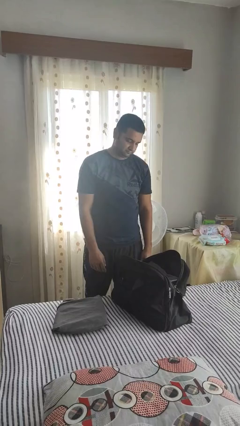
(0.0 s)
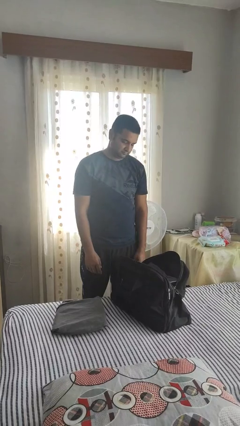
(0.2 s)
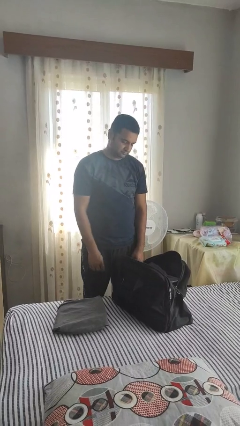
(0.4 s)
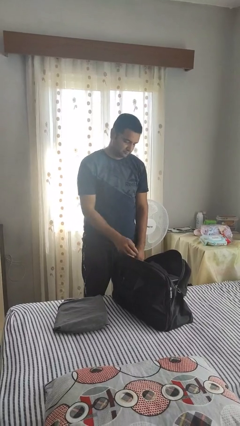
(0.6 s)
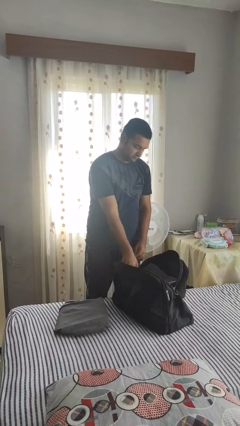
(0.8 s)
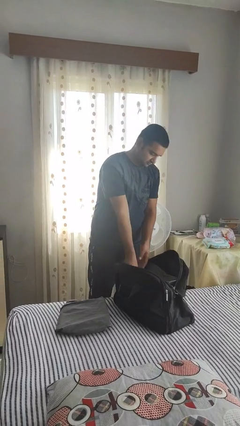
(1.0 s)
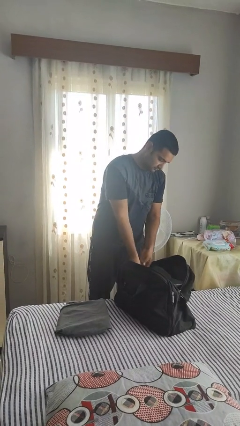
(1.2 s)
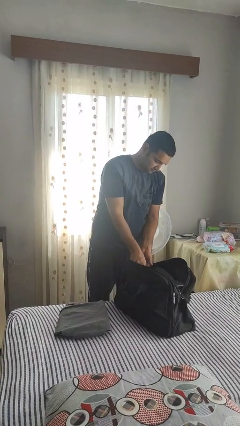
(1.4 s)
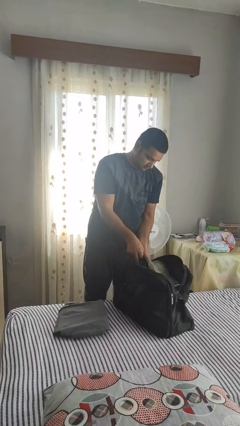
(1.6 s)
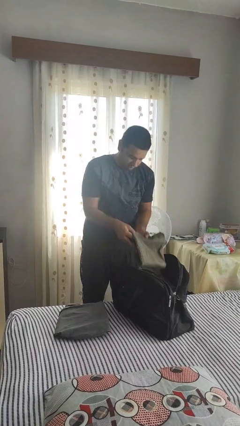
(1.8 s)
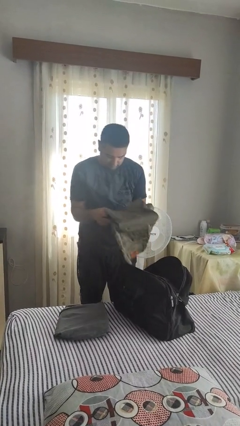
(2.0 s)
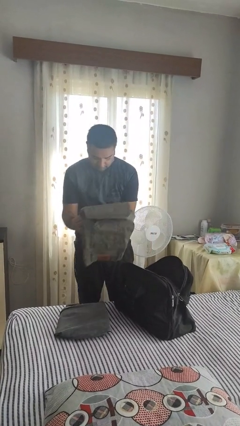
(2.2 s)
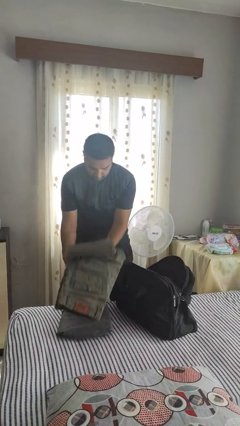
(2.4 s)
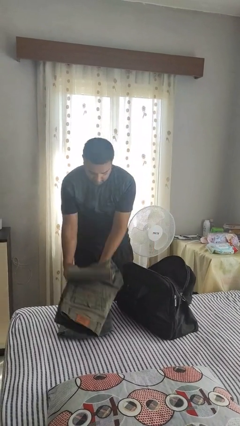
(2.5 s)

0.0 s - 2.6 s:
person unloads clothes from suitcase

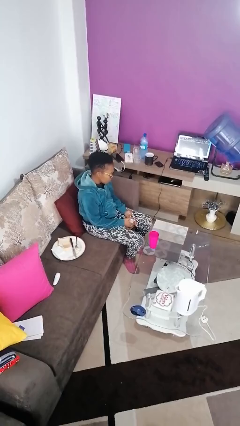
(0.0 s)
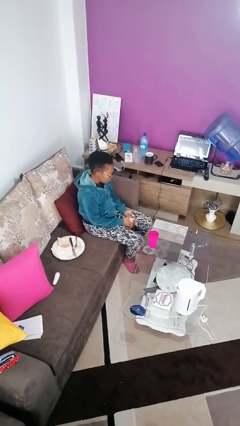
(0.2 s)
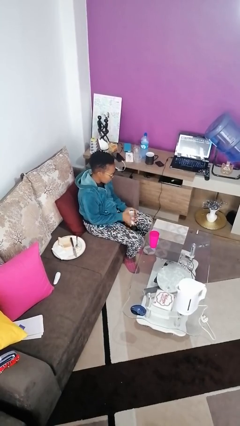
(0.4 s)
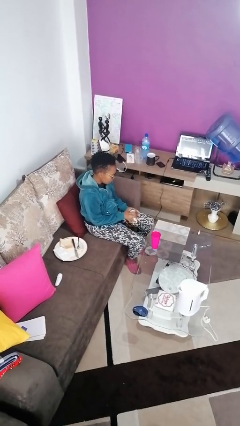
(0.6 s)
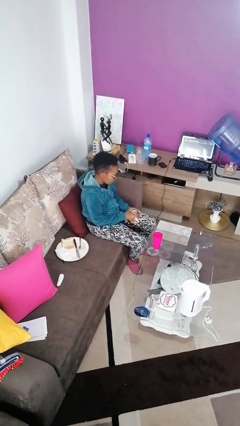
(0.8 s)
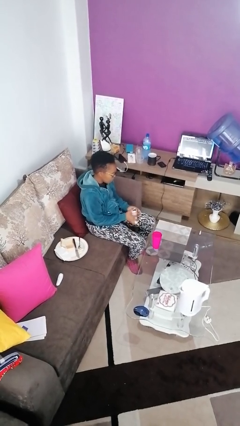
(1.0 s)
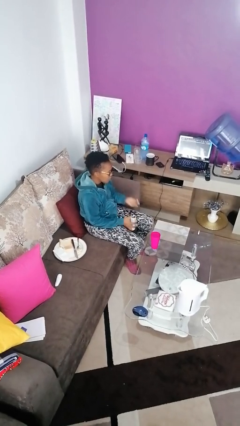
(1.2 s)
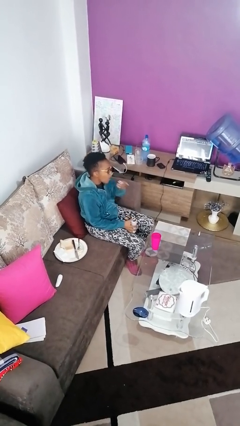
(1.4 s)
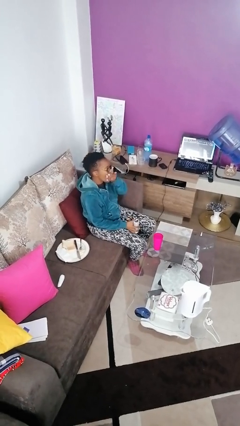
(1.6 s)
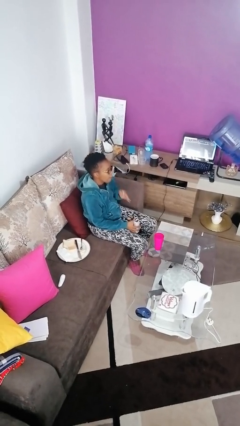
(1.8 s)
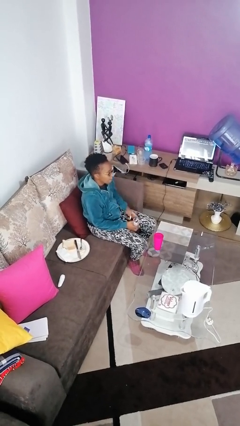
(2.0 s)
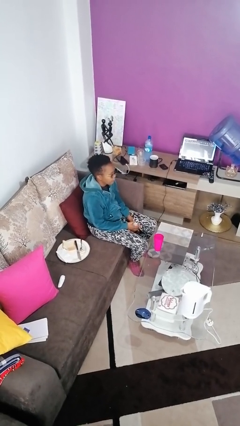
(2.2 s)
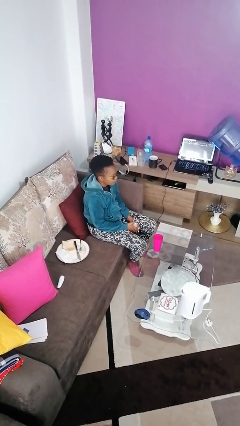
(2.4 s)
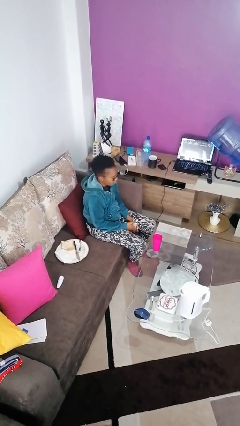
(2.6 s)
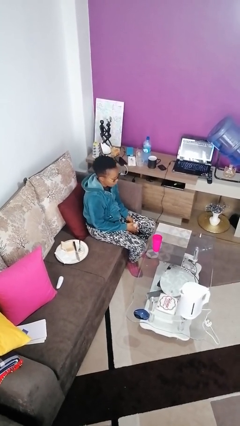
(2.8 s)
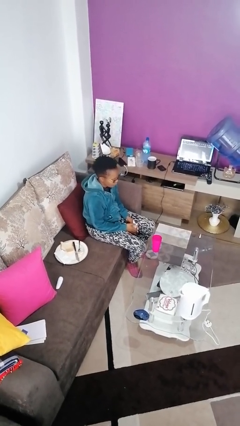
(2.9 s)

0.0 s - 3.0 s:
person takes medicine pills

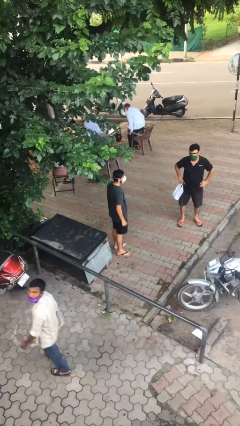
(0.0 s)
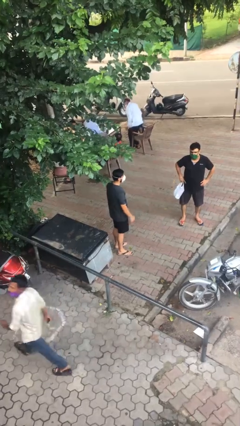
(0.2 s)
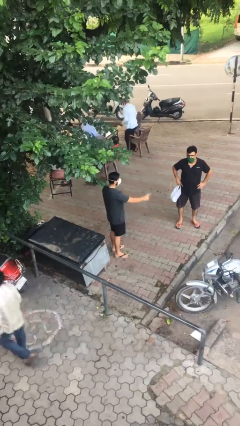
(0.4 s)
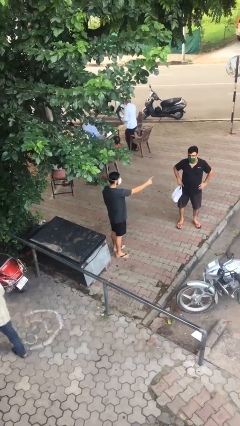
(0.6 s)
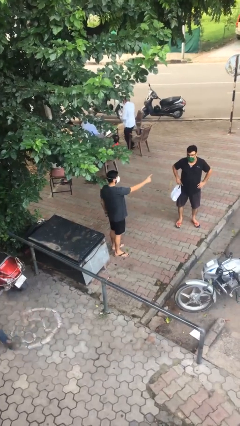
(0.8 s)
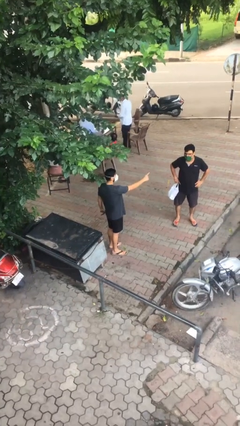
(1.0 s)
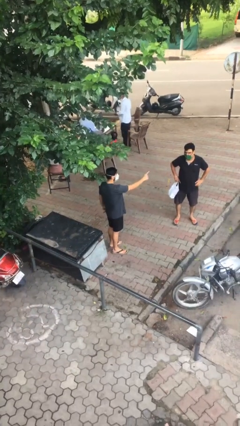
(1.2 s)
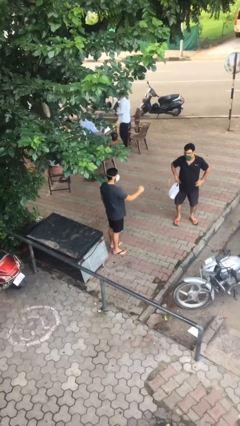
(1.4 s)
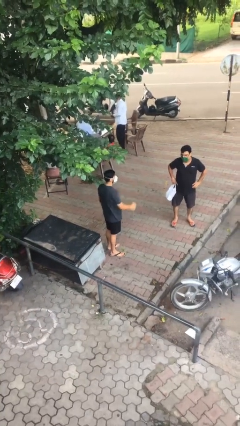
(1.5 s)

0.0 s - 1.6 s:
person points at person

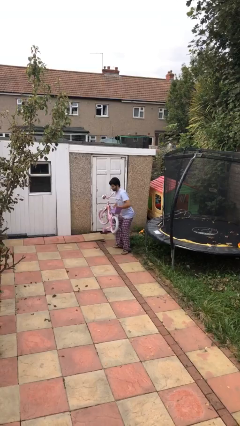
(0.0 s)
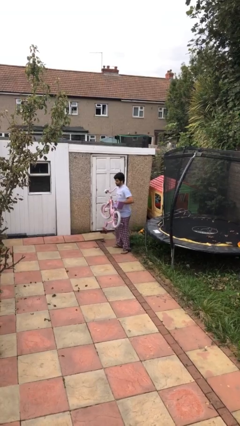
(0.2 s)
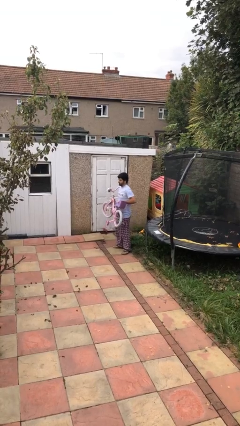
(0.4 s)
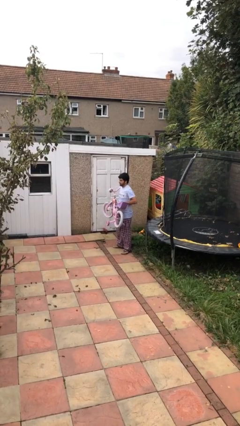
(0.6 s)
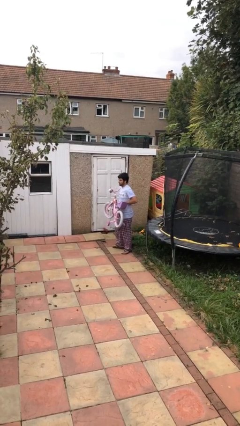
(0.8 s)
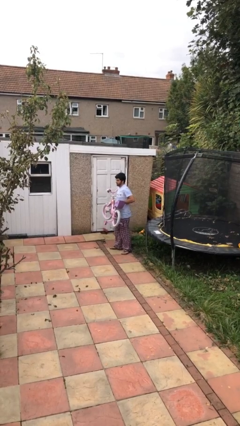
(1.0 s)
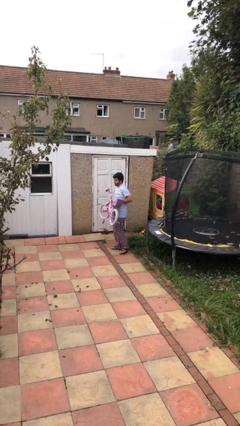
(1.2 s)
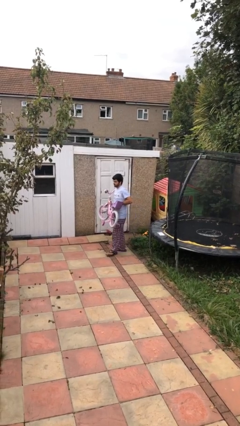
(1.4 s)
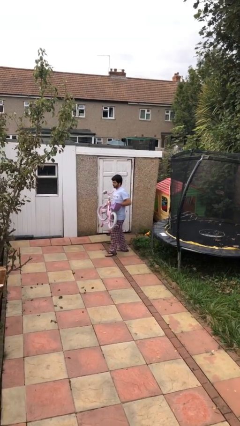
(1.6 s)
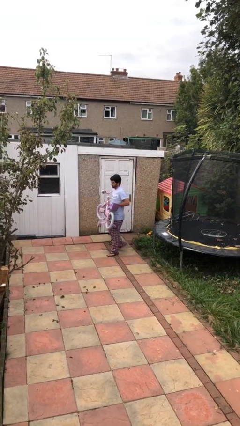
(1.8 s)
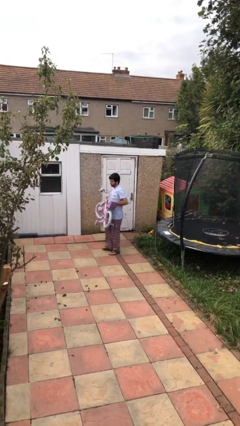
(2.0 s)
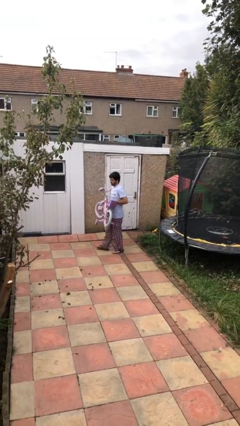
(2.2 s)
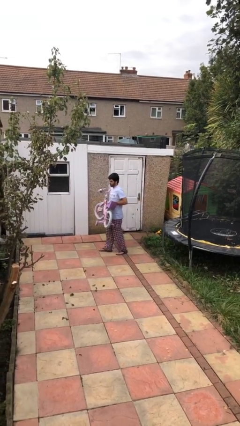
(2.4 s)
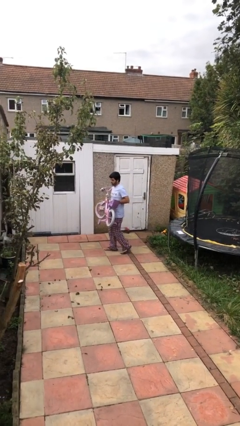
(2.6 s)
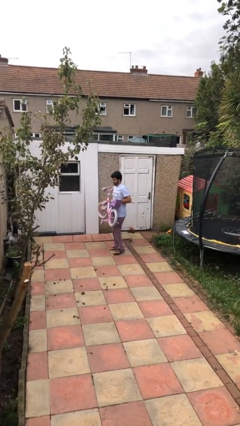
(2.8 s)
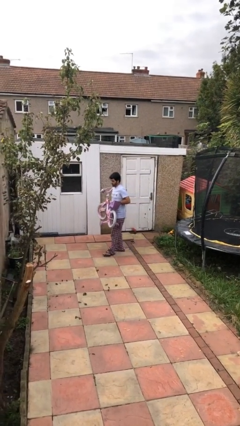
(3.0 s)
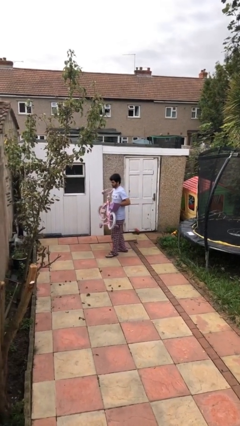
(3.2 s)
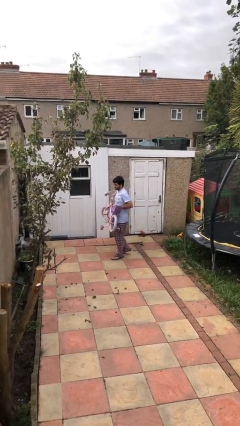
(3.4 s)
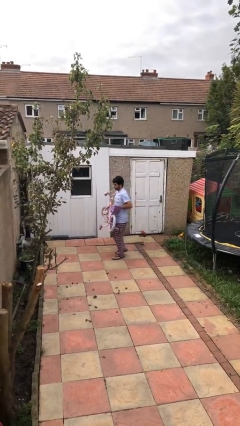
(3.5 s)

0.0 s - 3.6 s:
person carries heavy object

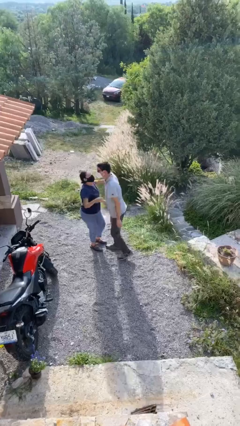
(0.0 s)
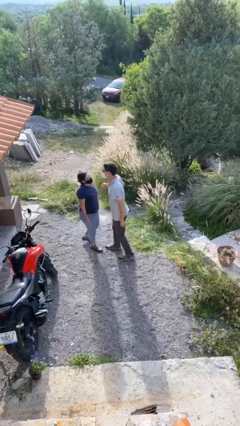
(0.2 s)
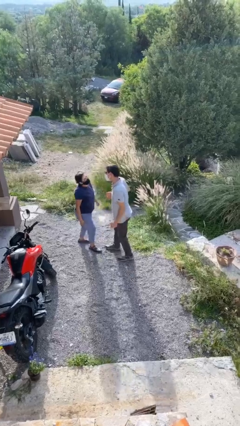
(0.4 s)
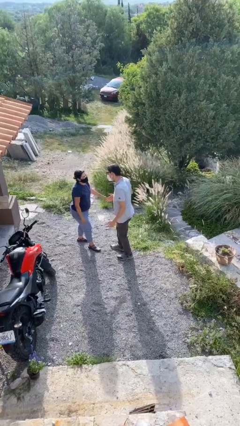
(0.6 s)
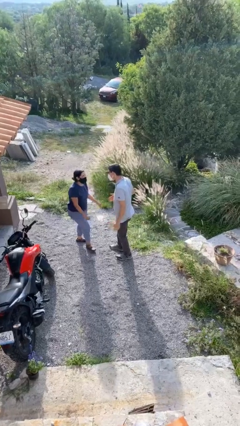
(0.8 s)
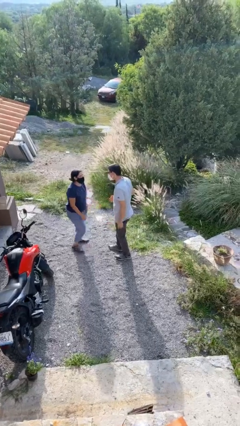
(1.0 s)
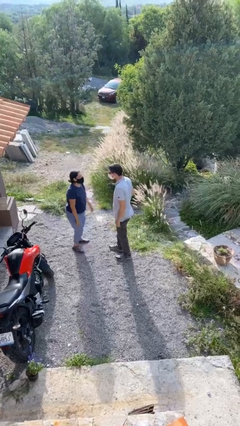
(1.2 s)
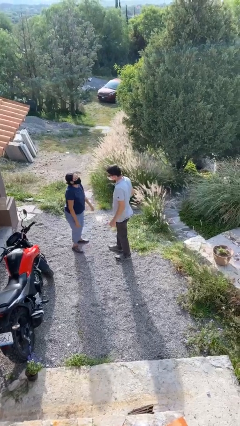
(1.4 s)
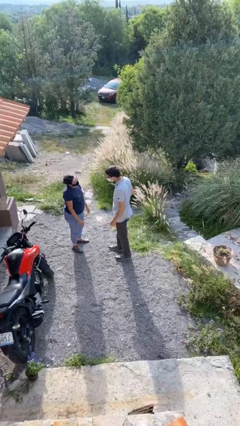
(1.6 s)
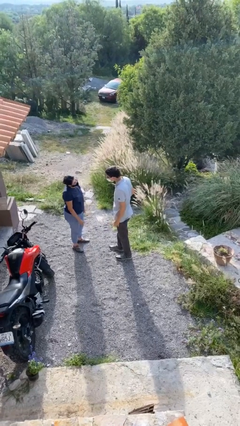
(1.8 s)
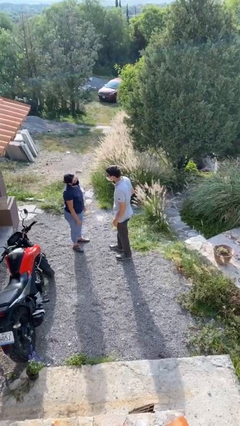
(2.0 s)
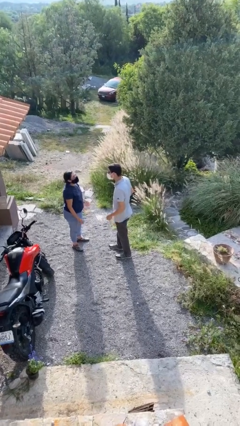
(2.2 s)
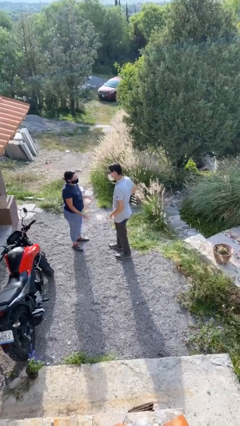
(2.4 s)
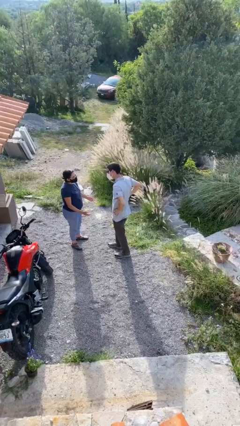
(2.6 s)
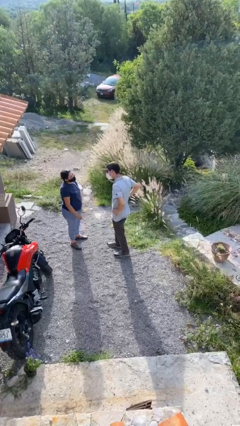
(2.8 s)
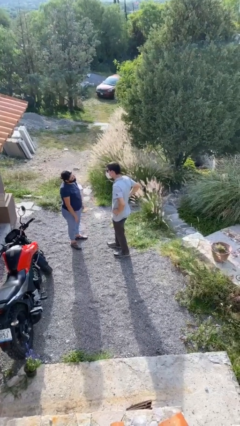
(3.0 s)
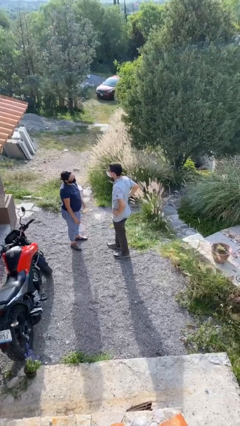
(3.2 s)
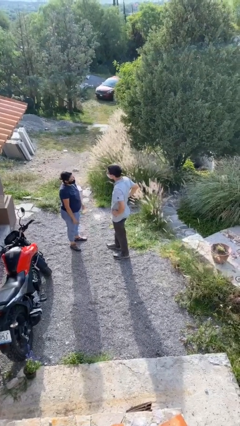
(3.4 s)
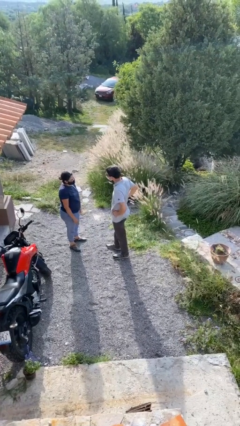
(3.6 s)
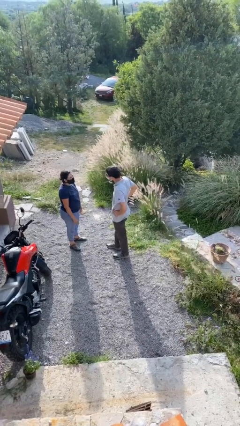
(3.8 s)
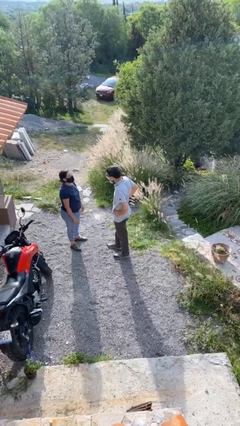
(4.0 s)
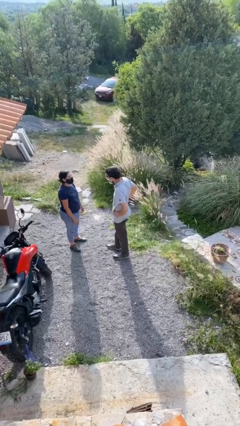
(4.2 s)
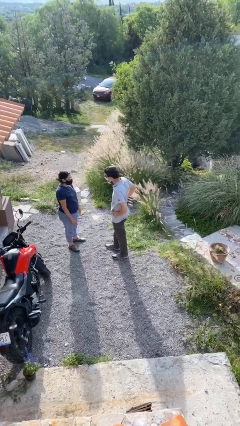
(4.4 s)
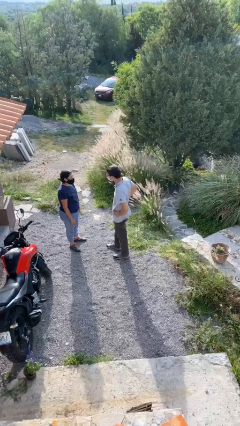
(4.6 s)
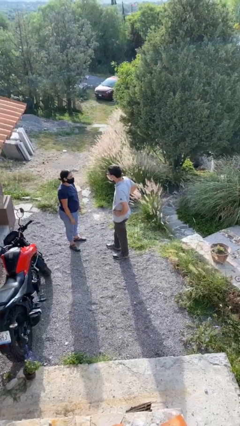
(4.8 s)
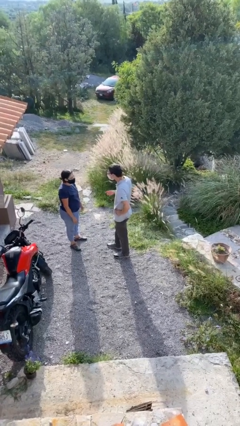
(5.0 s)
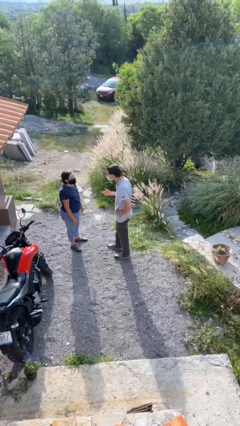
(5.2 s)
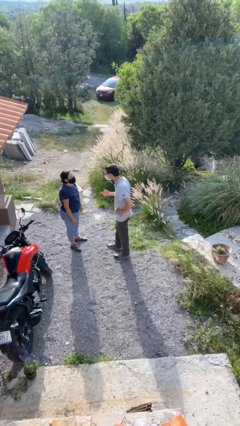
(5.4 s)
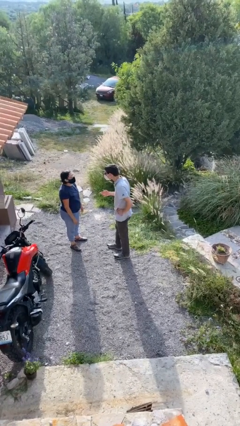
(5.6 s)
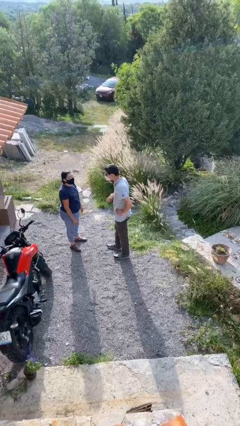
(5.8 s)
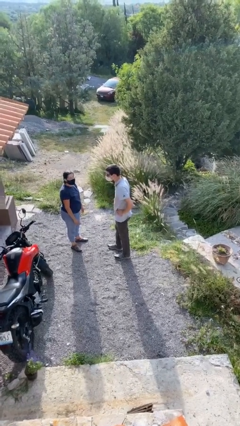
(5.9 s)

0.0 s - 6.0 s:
person talks to person

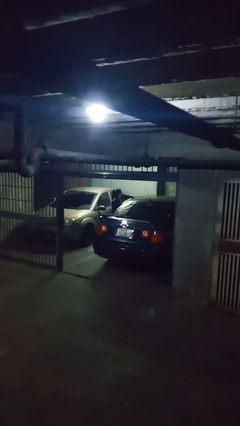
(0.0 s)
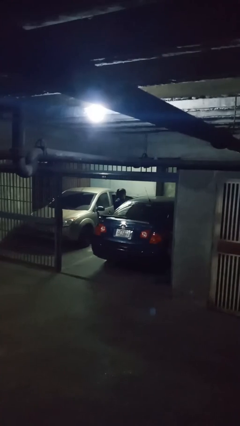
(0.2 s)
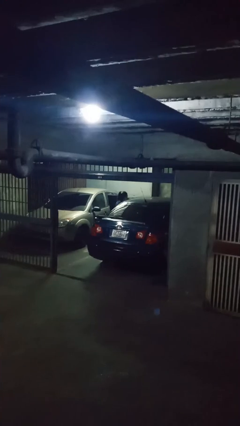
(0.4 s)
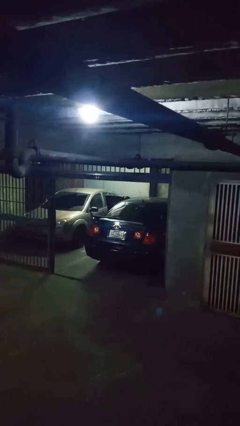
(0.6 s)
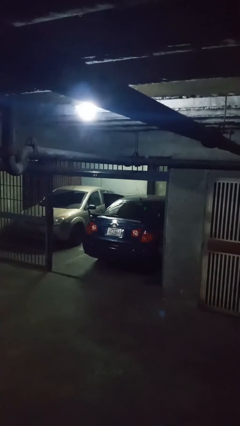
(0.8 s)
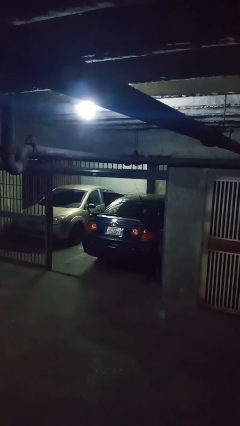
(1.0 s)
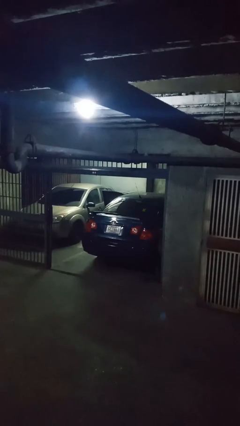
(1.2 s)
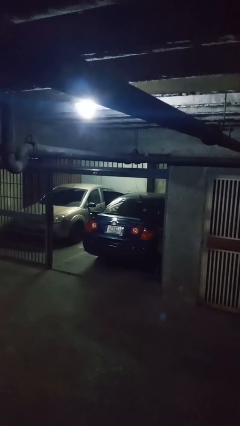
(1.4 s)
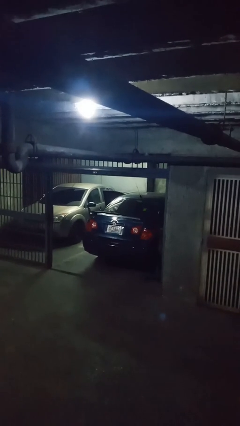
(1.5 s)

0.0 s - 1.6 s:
person loads car
